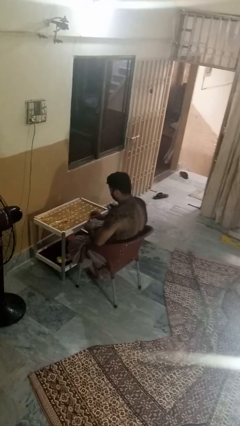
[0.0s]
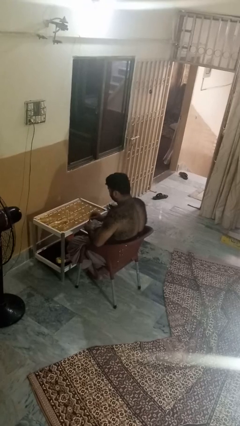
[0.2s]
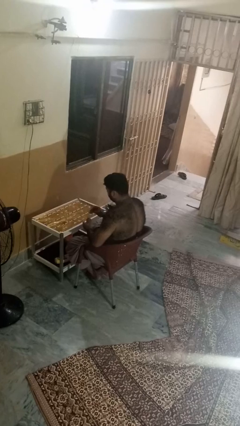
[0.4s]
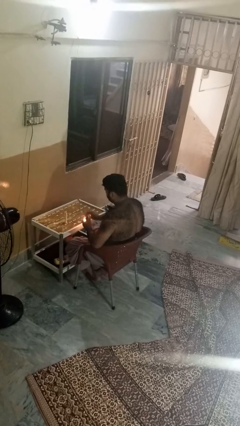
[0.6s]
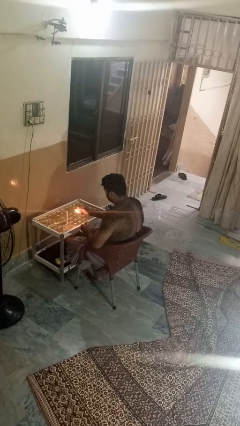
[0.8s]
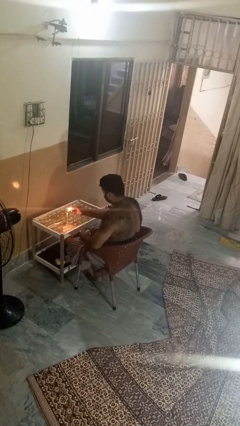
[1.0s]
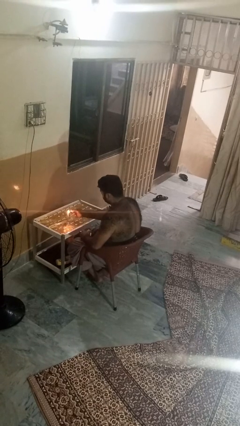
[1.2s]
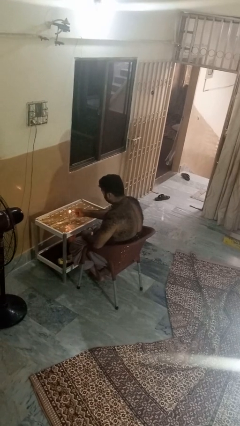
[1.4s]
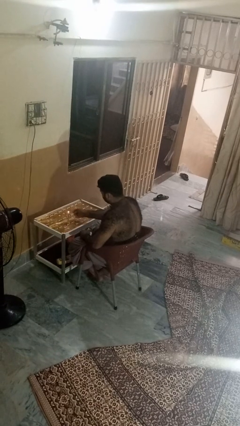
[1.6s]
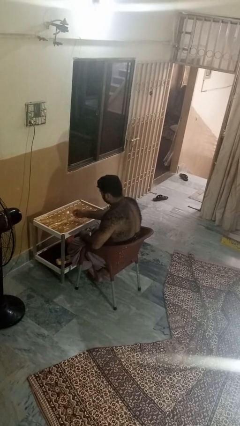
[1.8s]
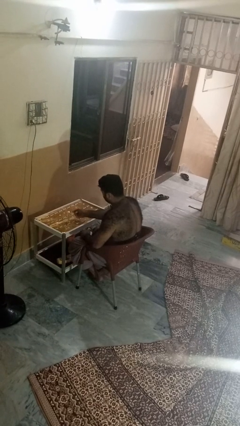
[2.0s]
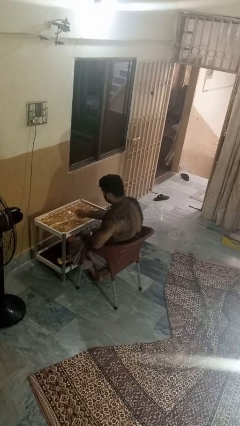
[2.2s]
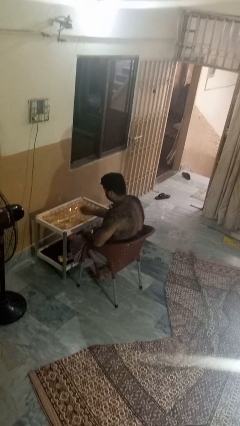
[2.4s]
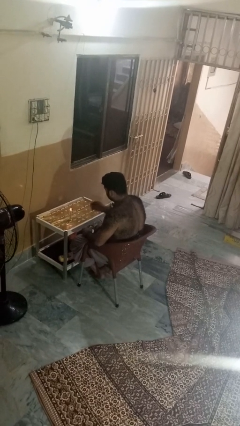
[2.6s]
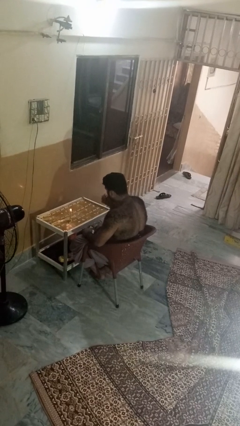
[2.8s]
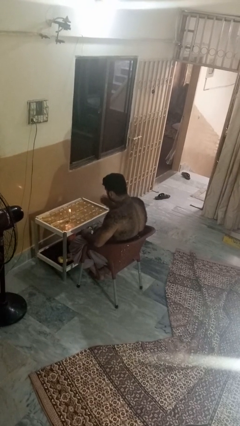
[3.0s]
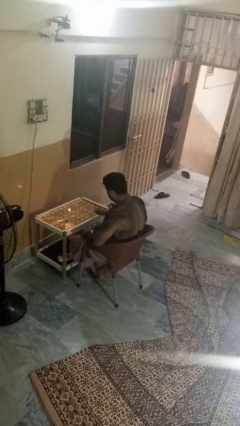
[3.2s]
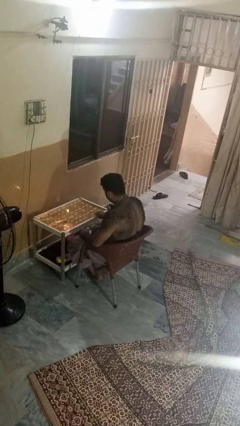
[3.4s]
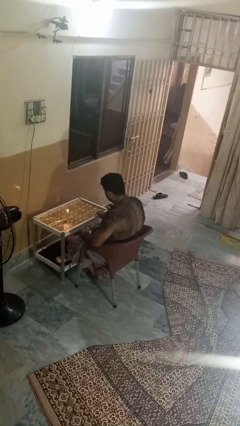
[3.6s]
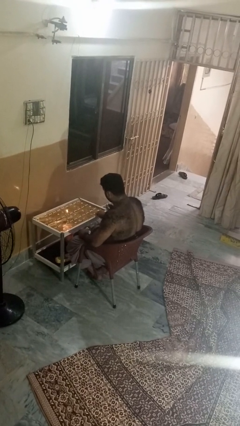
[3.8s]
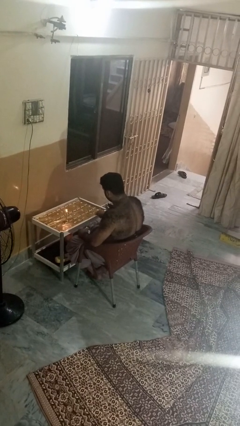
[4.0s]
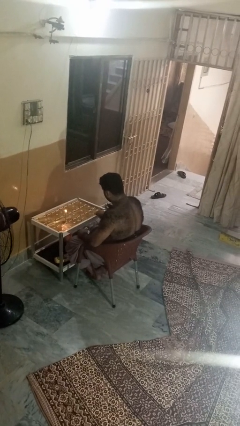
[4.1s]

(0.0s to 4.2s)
person lights candle

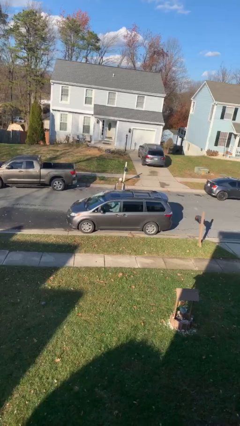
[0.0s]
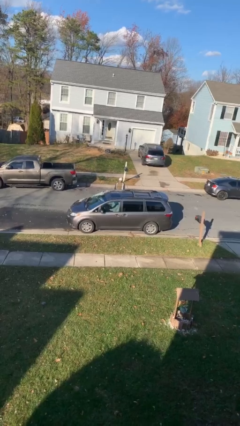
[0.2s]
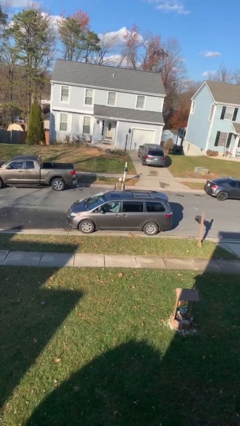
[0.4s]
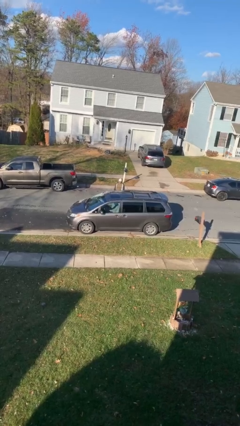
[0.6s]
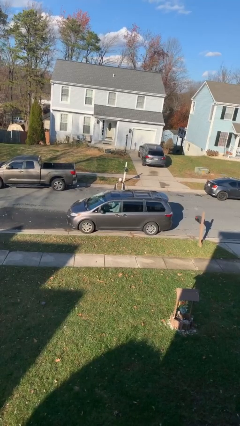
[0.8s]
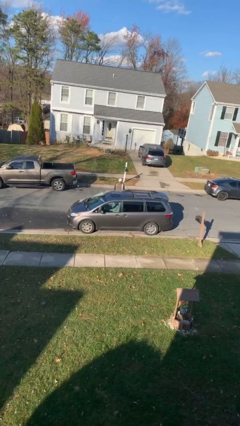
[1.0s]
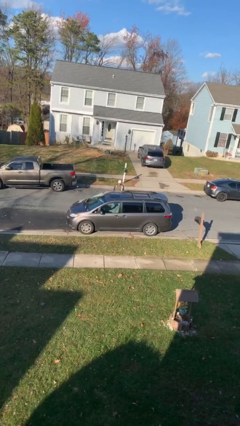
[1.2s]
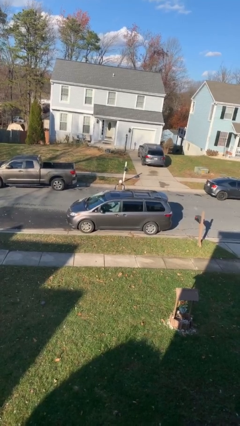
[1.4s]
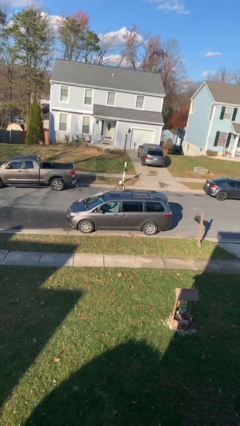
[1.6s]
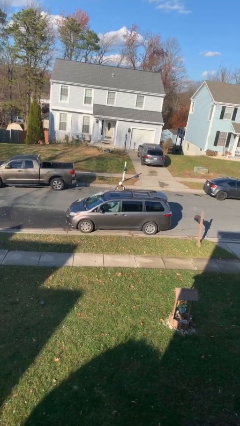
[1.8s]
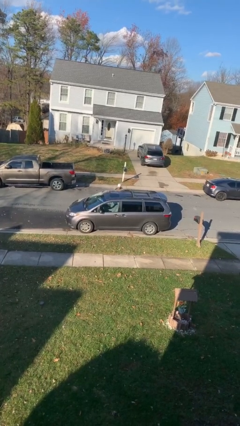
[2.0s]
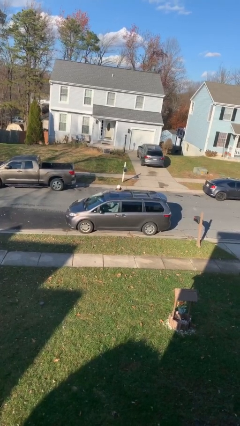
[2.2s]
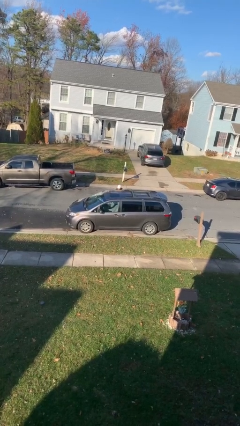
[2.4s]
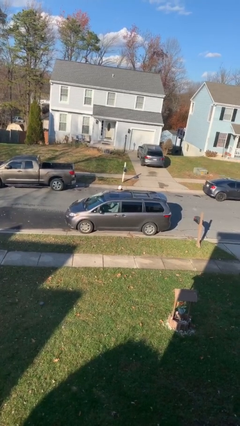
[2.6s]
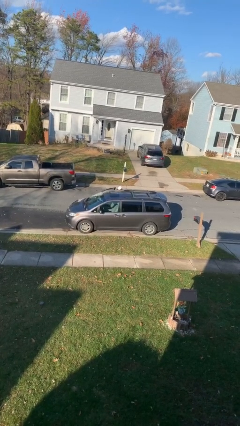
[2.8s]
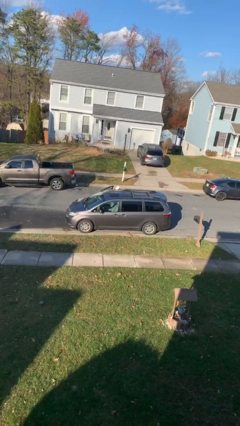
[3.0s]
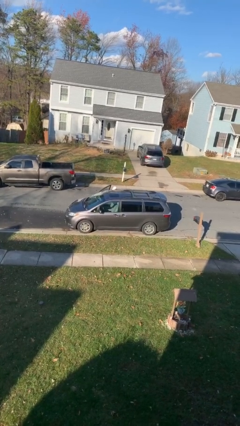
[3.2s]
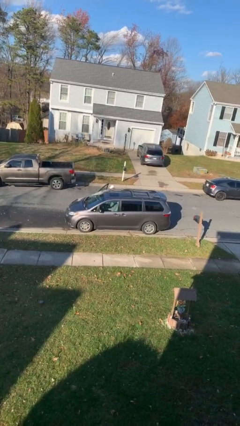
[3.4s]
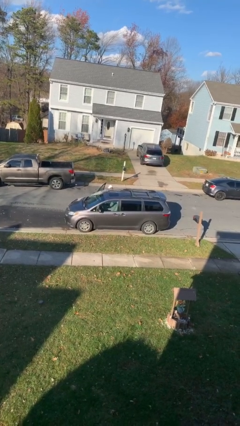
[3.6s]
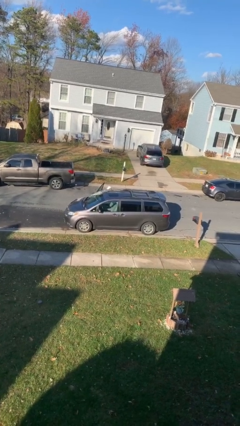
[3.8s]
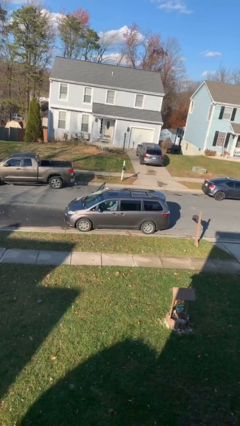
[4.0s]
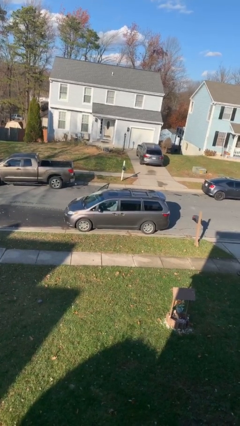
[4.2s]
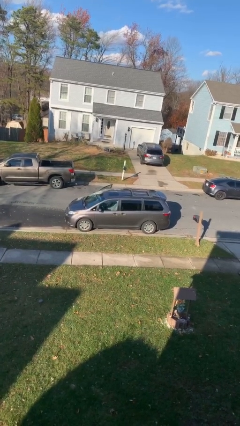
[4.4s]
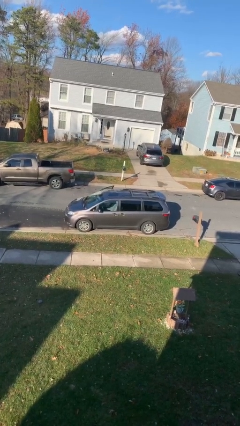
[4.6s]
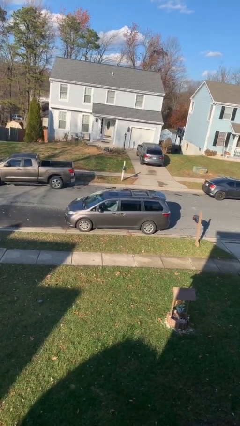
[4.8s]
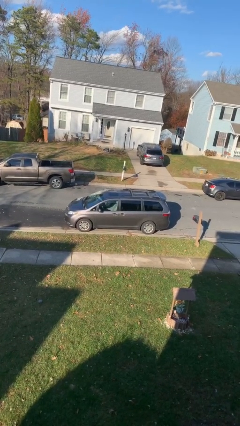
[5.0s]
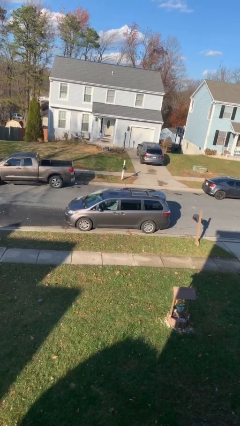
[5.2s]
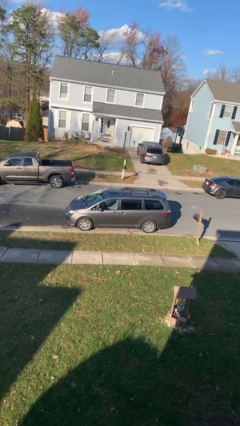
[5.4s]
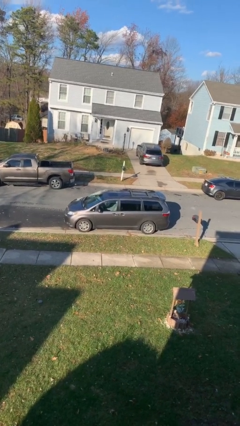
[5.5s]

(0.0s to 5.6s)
car picks up person

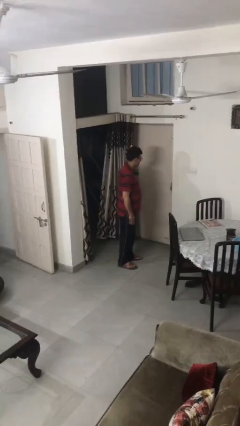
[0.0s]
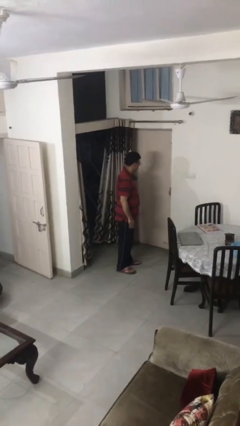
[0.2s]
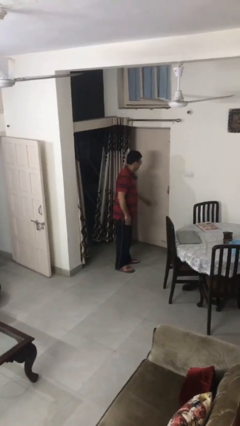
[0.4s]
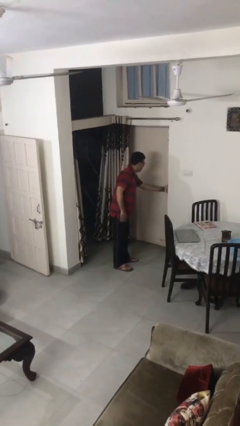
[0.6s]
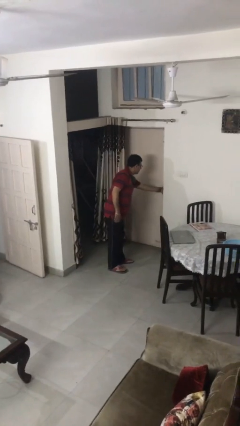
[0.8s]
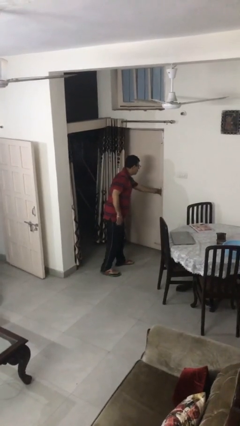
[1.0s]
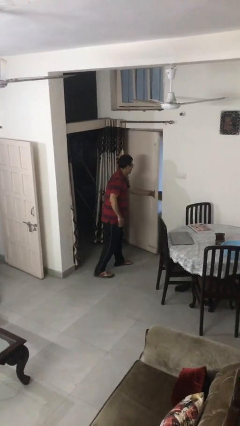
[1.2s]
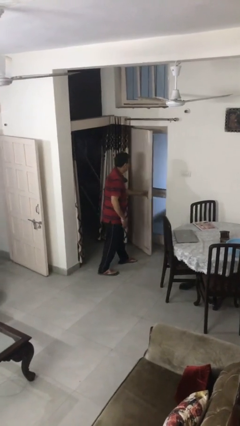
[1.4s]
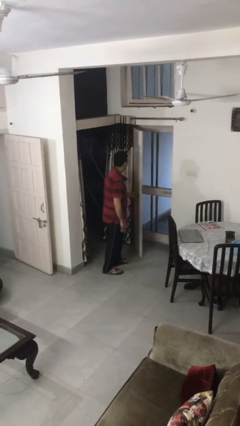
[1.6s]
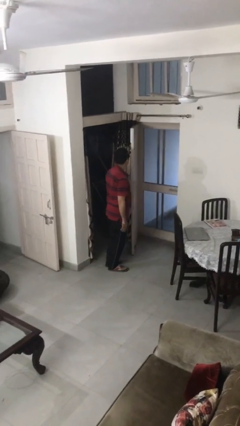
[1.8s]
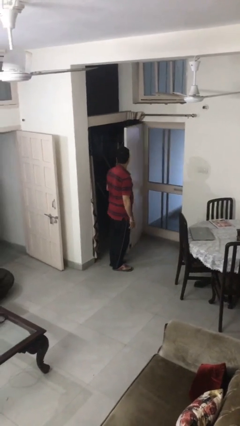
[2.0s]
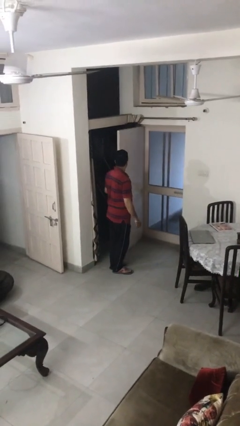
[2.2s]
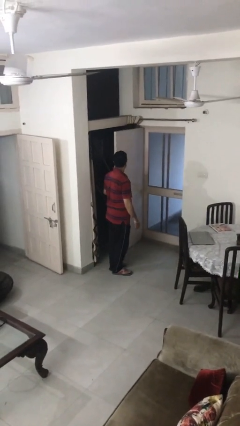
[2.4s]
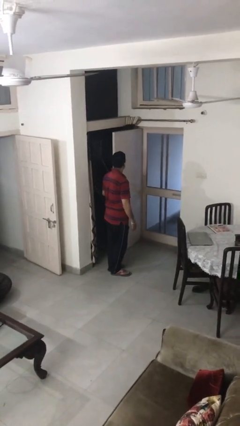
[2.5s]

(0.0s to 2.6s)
person opens facility door

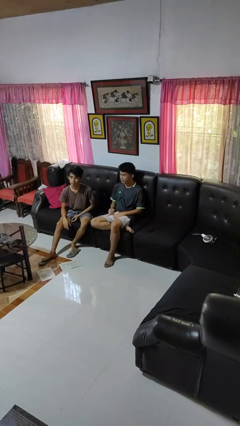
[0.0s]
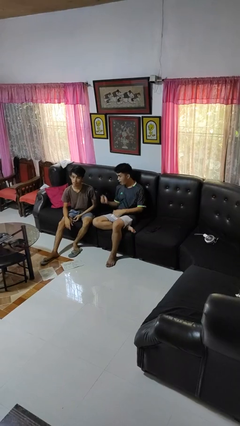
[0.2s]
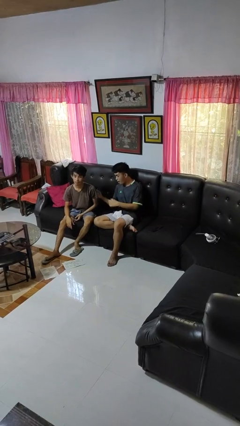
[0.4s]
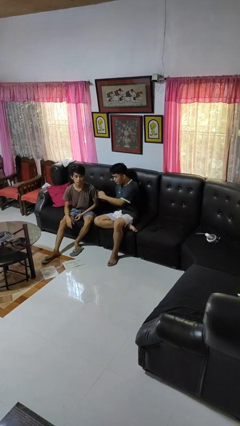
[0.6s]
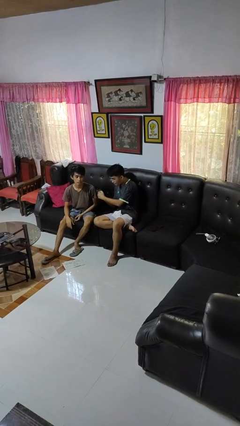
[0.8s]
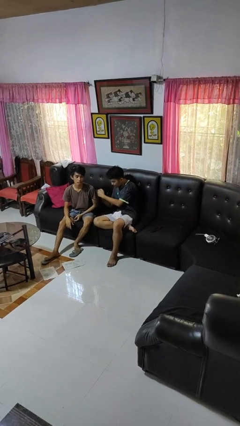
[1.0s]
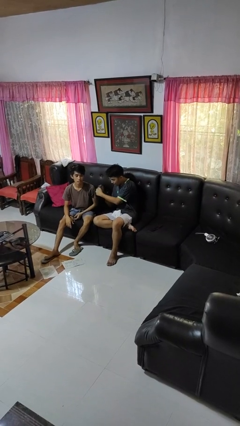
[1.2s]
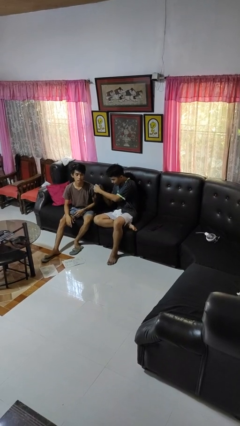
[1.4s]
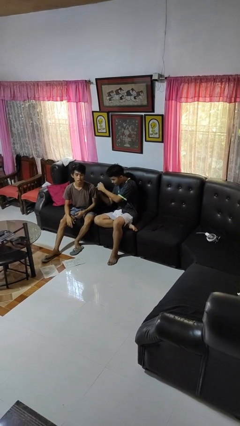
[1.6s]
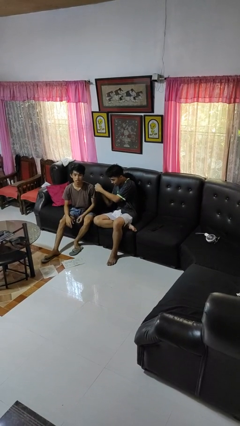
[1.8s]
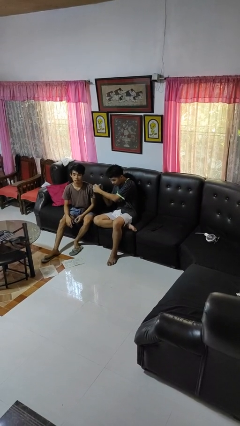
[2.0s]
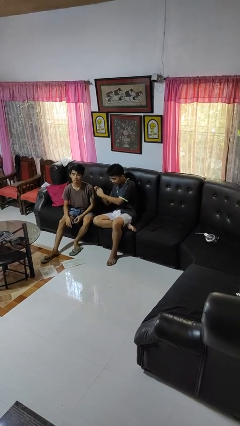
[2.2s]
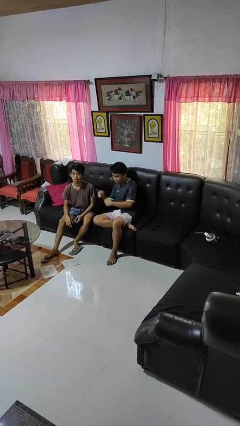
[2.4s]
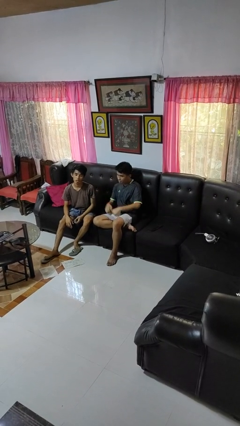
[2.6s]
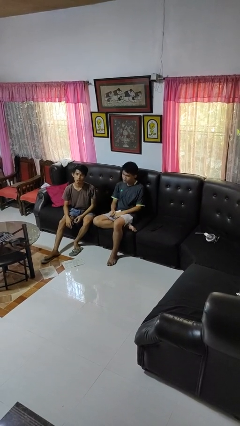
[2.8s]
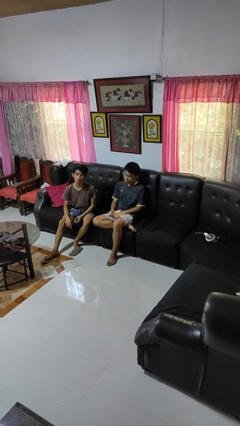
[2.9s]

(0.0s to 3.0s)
person pounds shoulders of person

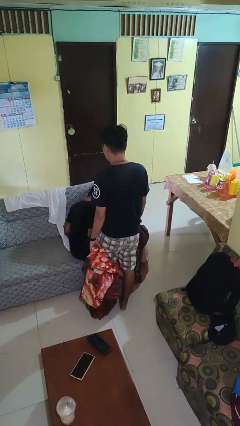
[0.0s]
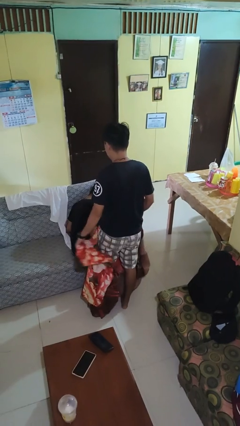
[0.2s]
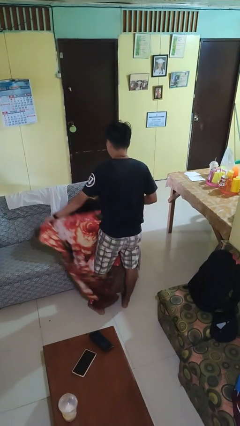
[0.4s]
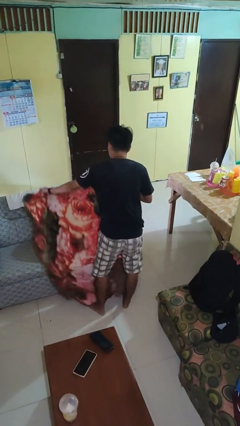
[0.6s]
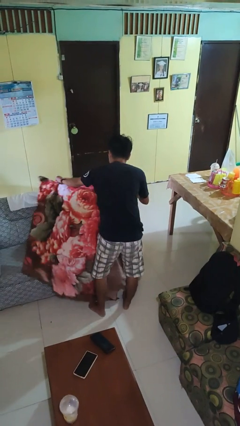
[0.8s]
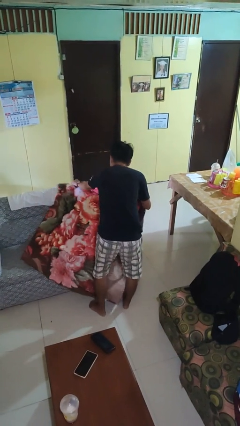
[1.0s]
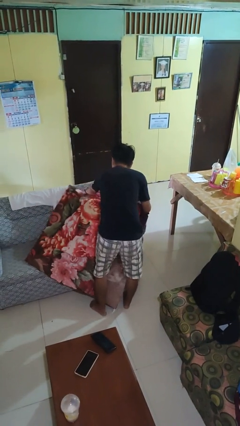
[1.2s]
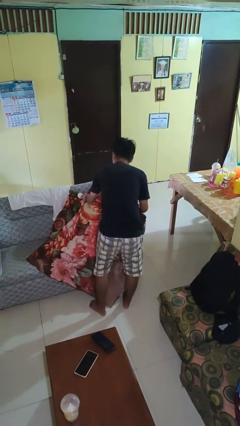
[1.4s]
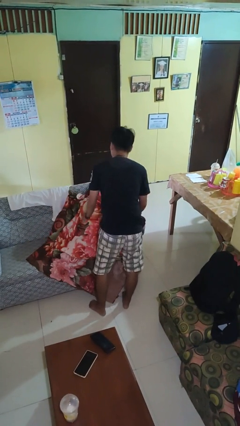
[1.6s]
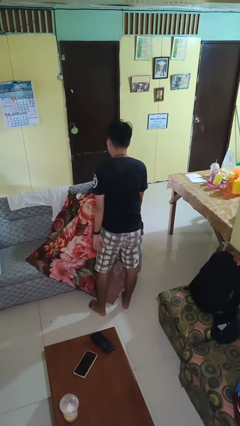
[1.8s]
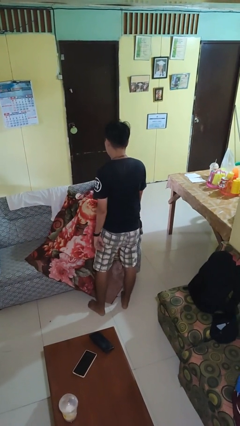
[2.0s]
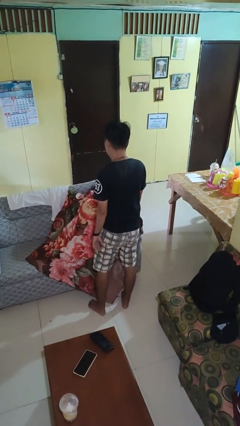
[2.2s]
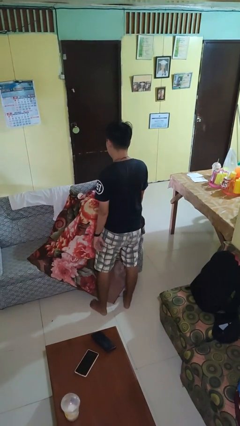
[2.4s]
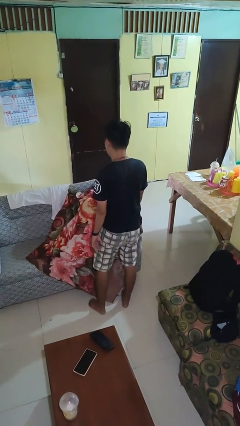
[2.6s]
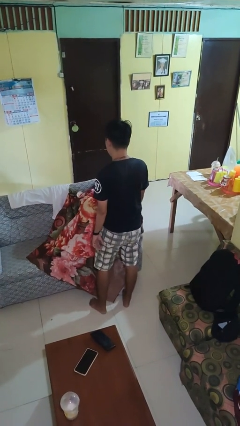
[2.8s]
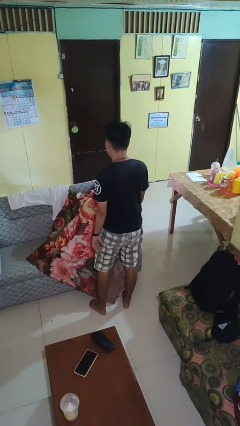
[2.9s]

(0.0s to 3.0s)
person covers friend with blanket
